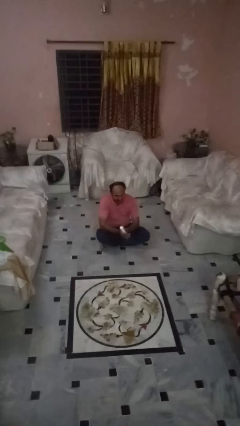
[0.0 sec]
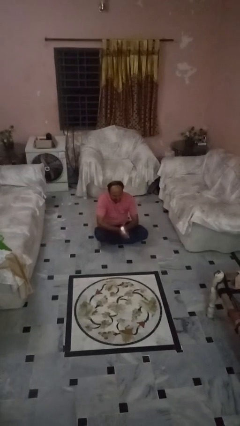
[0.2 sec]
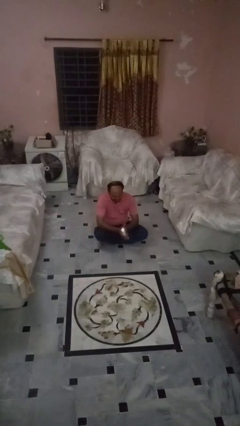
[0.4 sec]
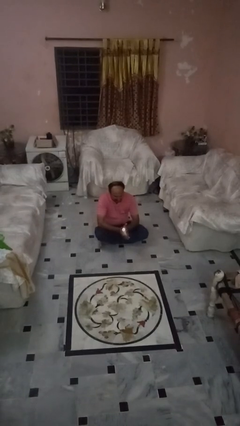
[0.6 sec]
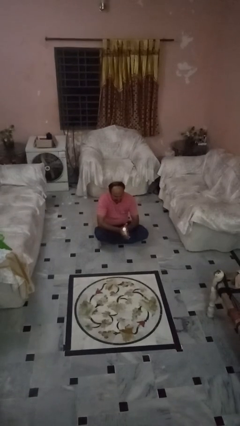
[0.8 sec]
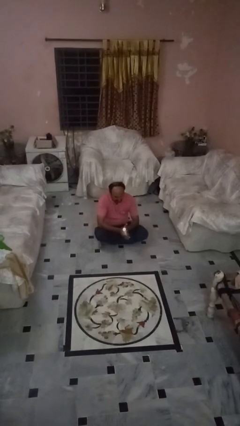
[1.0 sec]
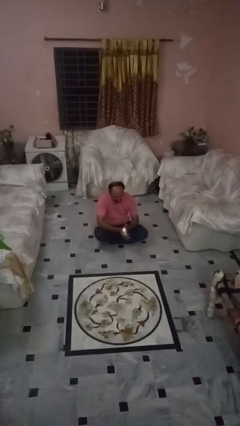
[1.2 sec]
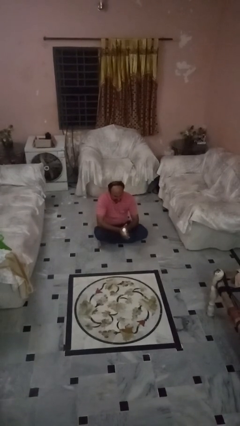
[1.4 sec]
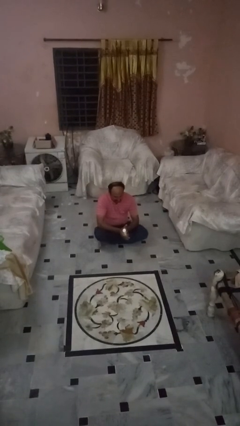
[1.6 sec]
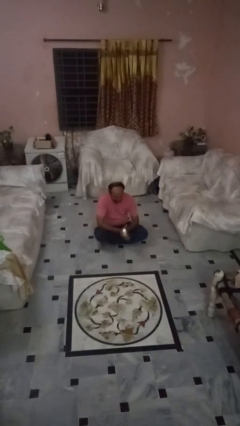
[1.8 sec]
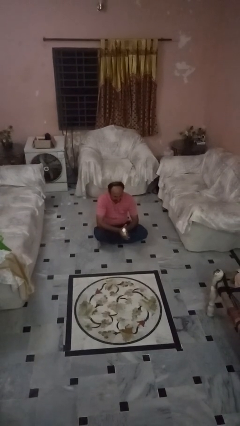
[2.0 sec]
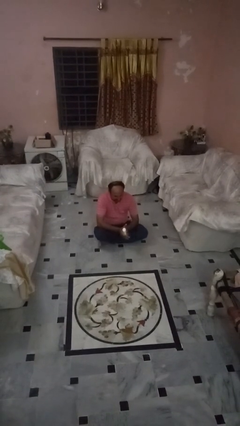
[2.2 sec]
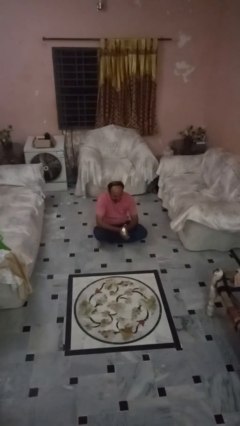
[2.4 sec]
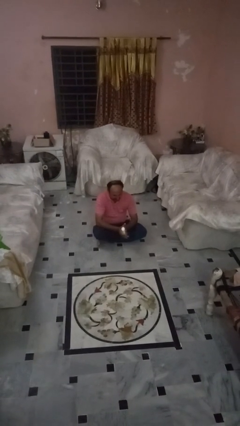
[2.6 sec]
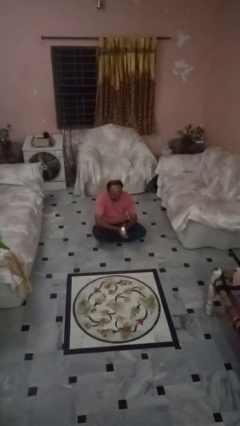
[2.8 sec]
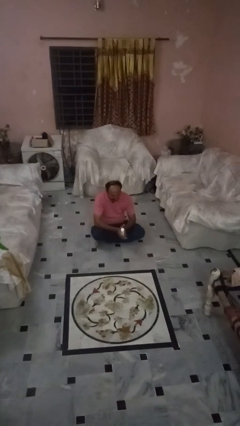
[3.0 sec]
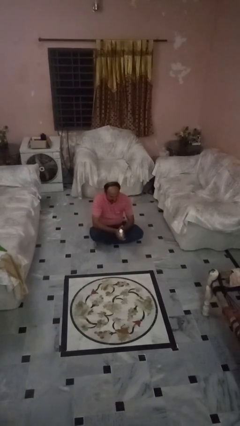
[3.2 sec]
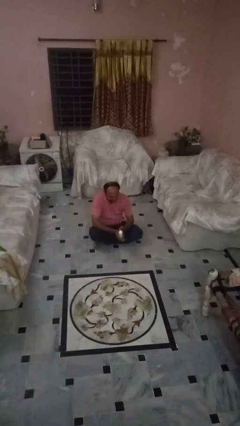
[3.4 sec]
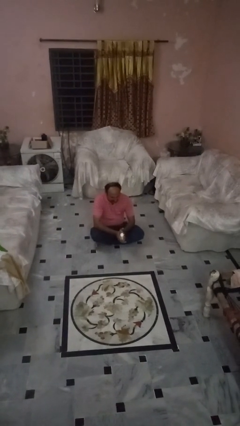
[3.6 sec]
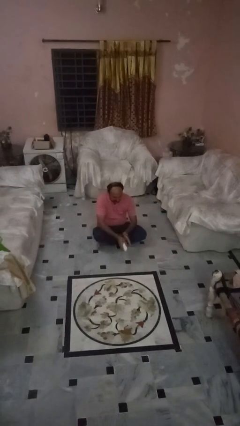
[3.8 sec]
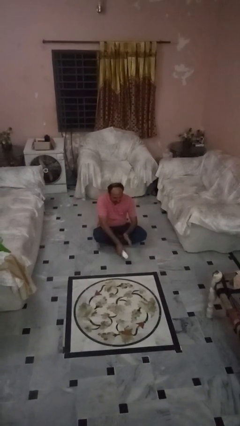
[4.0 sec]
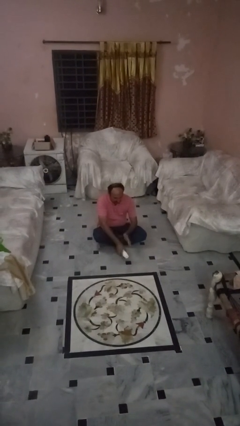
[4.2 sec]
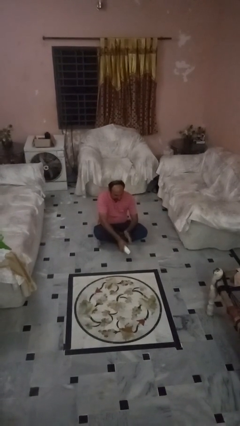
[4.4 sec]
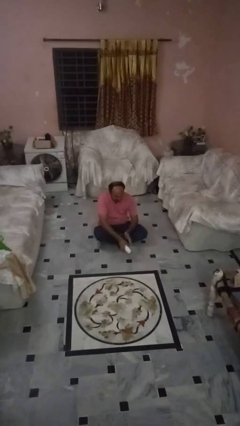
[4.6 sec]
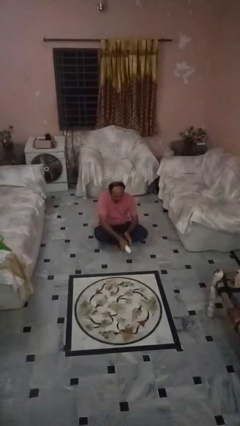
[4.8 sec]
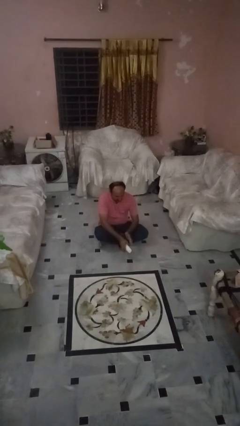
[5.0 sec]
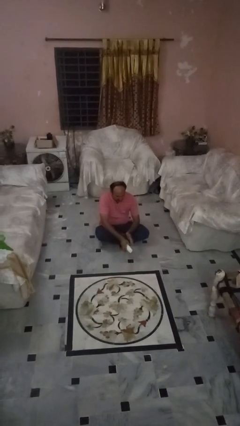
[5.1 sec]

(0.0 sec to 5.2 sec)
person catches dropped object

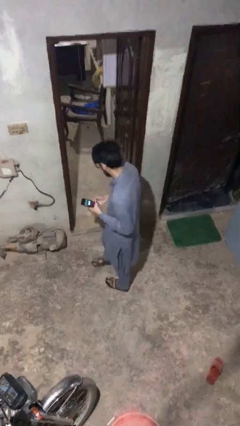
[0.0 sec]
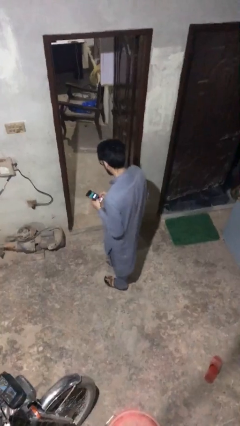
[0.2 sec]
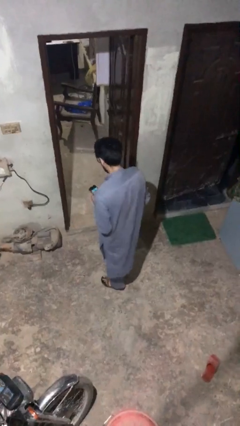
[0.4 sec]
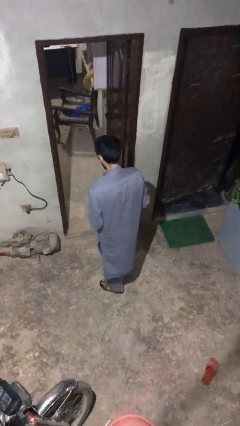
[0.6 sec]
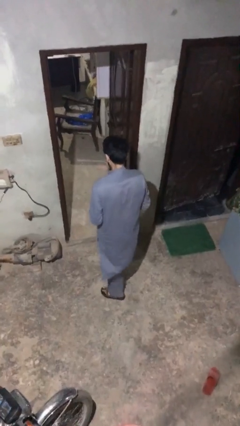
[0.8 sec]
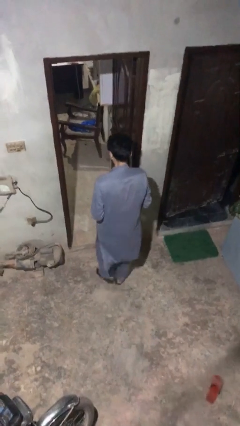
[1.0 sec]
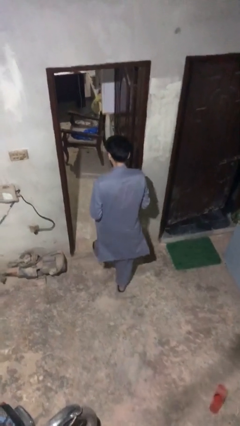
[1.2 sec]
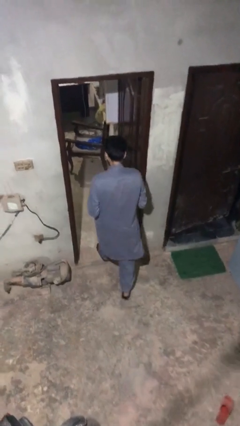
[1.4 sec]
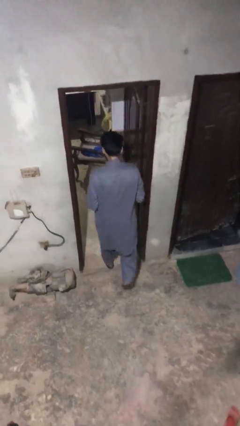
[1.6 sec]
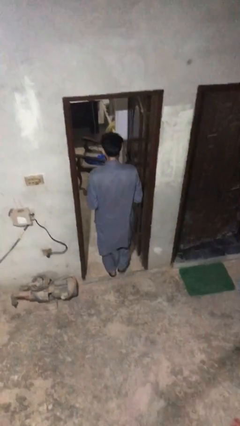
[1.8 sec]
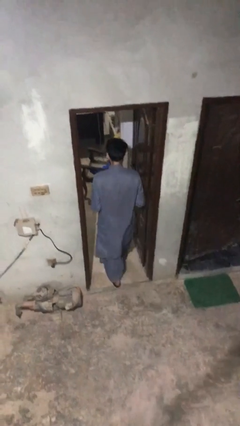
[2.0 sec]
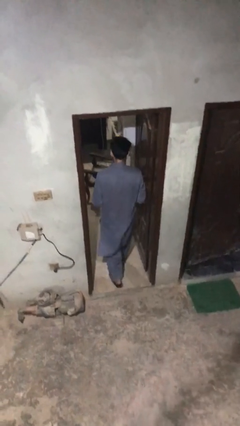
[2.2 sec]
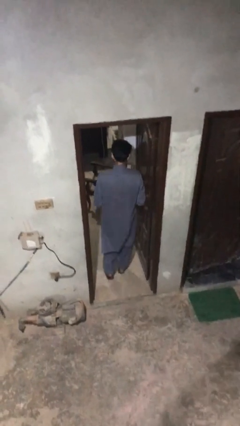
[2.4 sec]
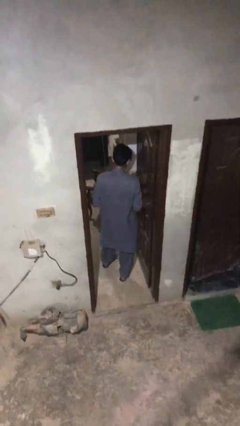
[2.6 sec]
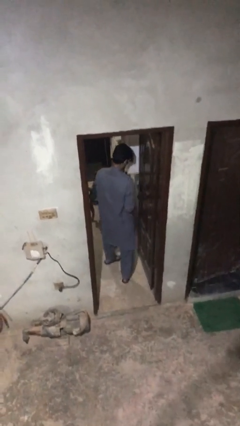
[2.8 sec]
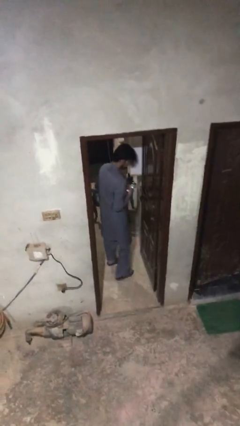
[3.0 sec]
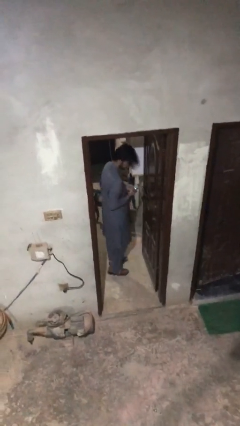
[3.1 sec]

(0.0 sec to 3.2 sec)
person enters scene through structure

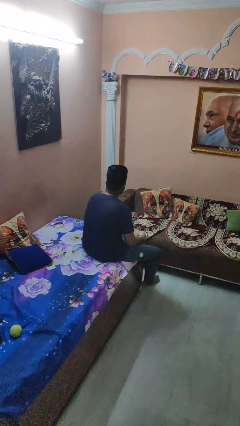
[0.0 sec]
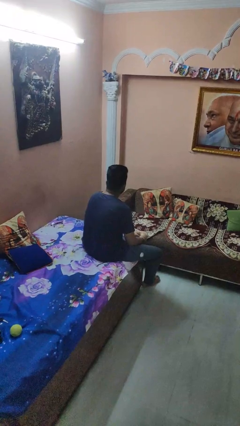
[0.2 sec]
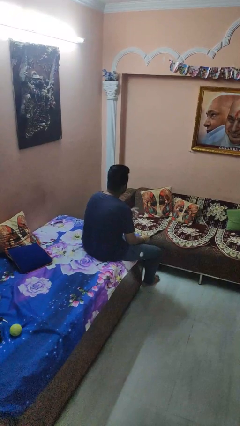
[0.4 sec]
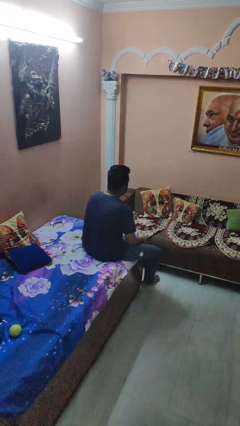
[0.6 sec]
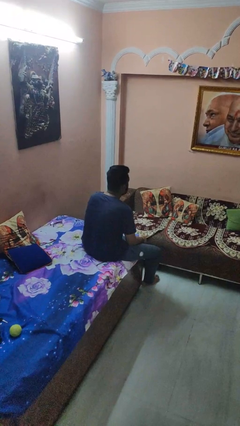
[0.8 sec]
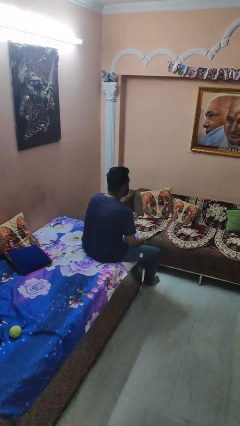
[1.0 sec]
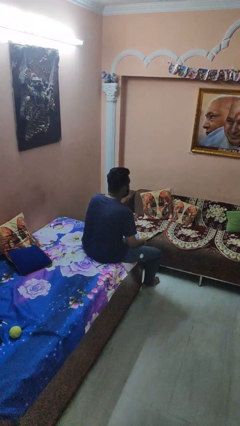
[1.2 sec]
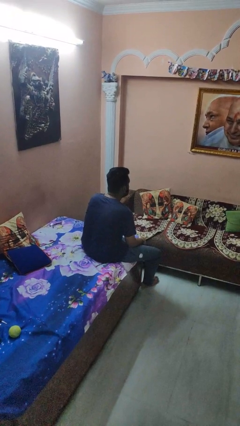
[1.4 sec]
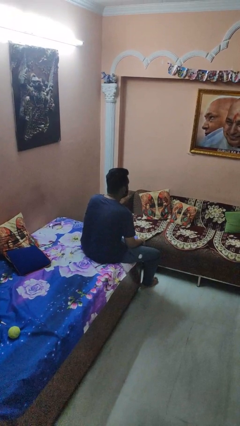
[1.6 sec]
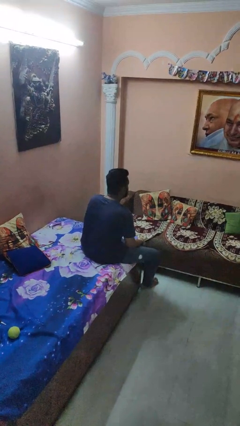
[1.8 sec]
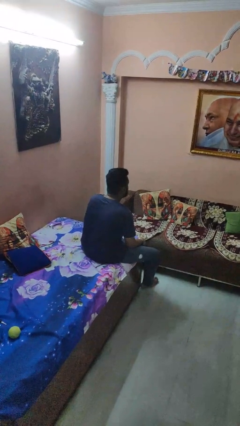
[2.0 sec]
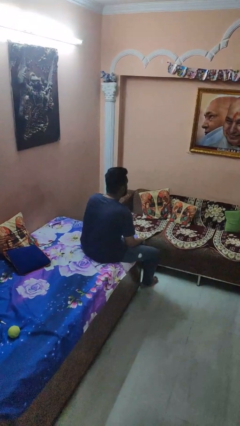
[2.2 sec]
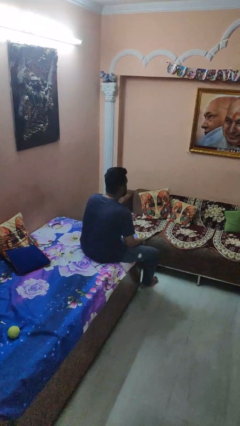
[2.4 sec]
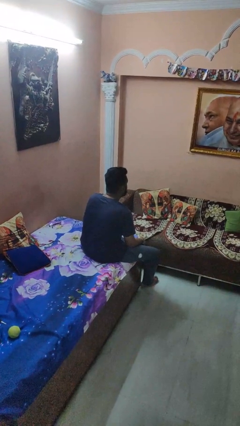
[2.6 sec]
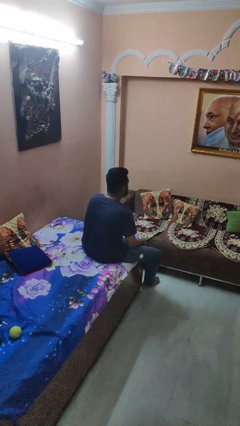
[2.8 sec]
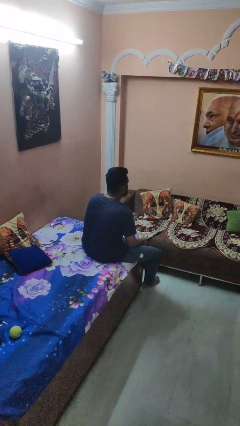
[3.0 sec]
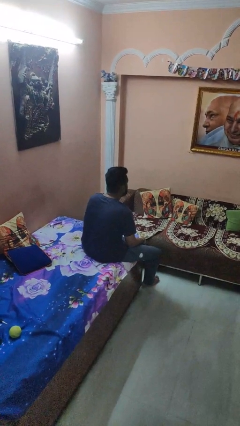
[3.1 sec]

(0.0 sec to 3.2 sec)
person gestures listen closely

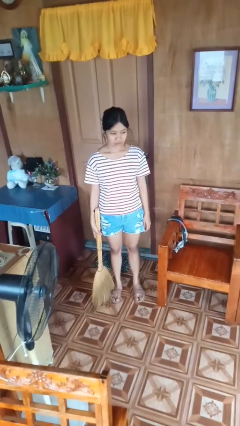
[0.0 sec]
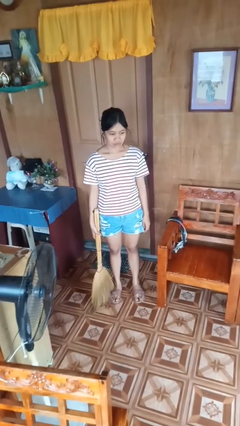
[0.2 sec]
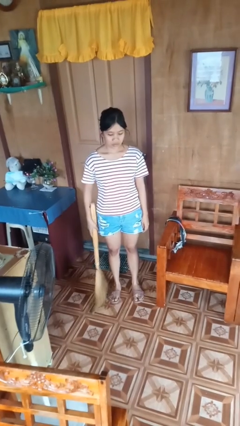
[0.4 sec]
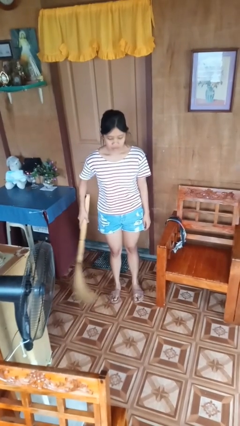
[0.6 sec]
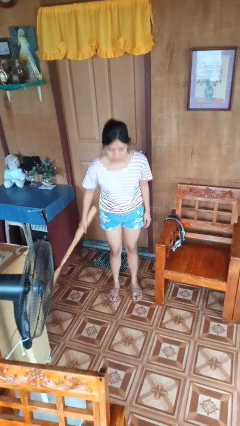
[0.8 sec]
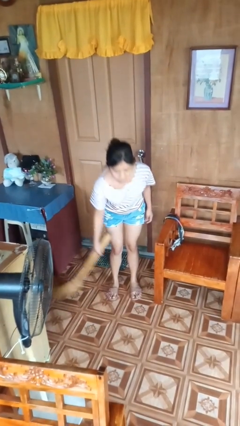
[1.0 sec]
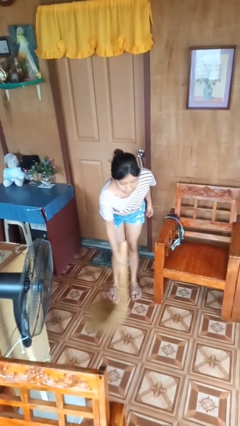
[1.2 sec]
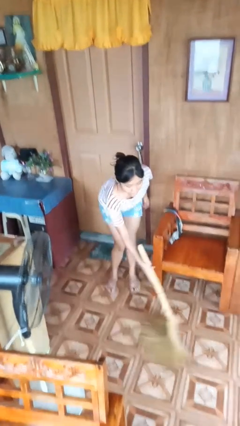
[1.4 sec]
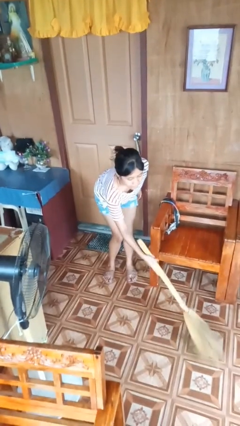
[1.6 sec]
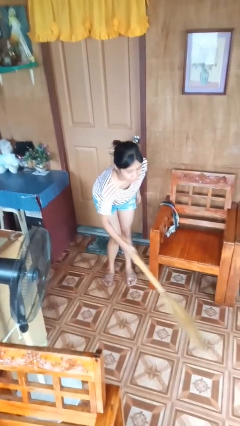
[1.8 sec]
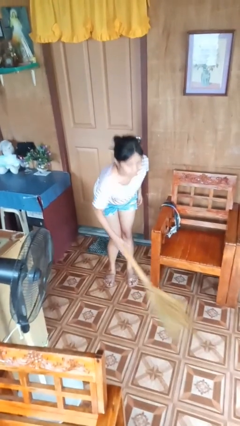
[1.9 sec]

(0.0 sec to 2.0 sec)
person sweeps floor

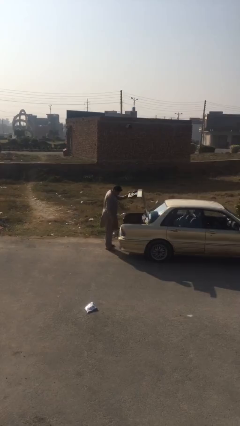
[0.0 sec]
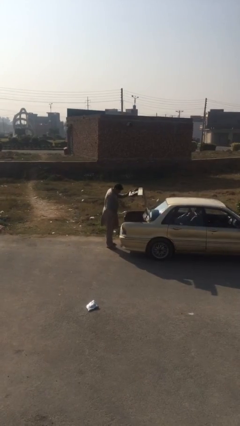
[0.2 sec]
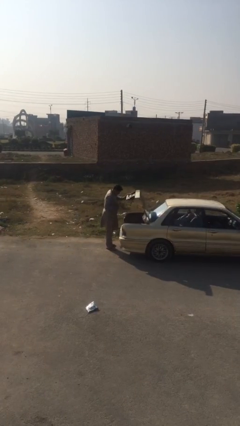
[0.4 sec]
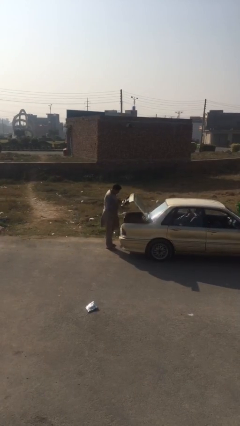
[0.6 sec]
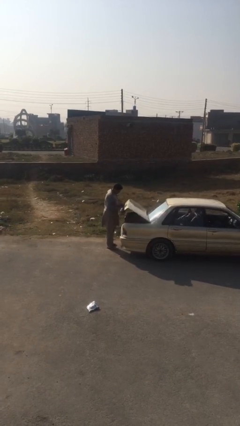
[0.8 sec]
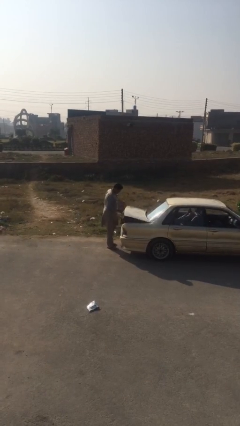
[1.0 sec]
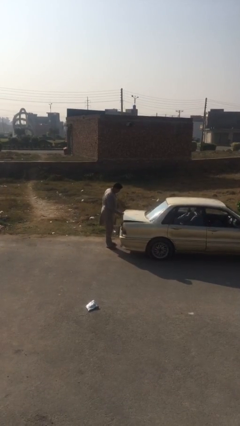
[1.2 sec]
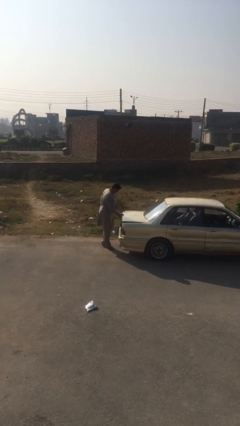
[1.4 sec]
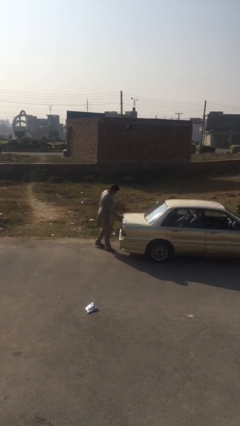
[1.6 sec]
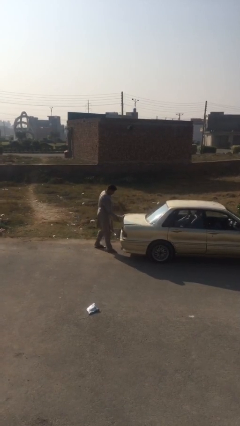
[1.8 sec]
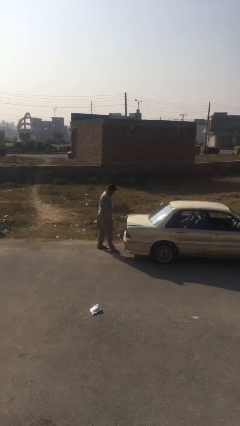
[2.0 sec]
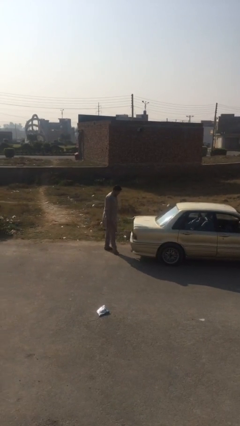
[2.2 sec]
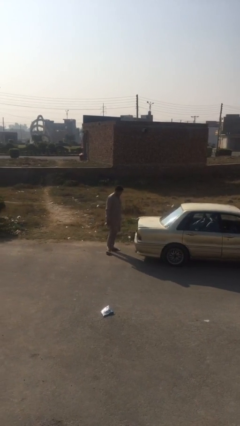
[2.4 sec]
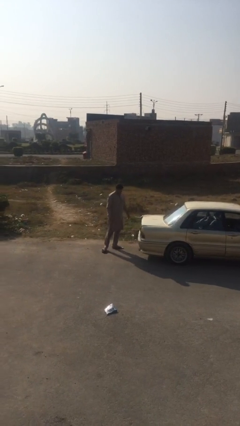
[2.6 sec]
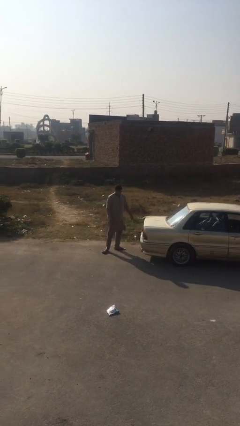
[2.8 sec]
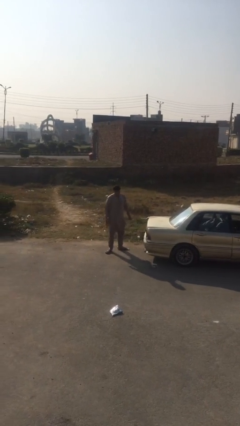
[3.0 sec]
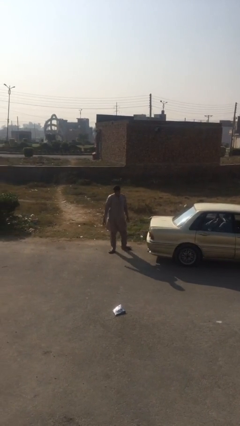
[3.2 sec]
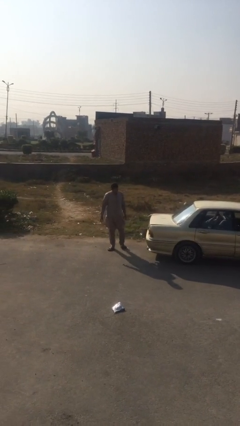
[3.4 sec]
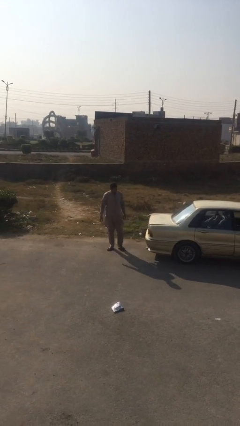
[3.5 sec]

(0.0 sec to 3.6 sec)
person closes car trunk
